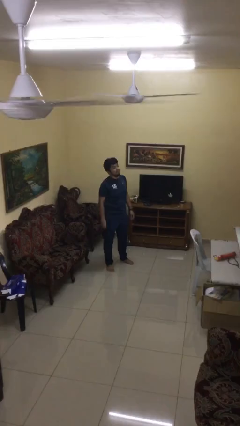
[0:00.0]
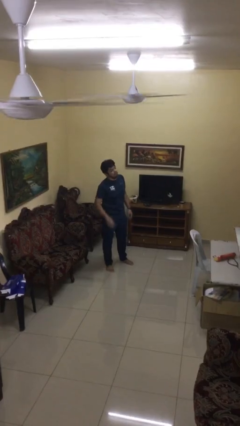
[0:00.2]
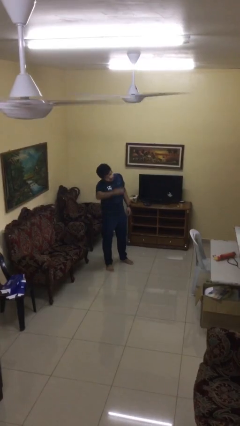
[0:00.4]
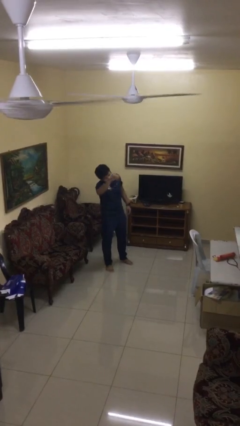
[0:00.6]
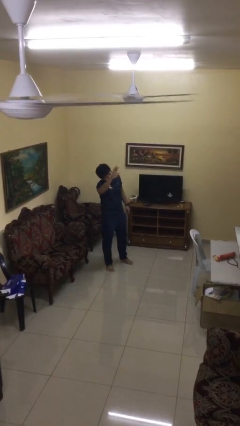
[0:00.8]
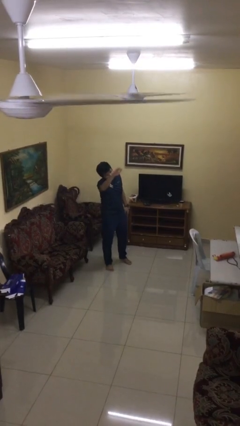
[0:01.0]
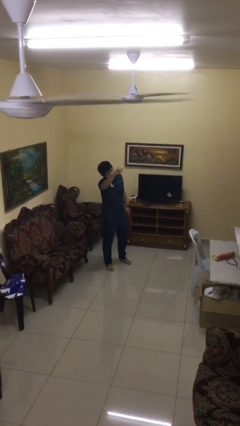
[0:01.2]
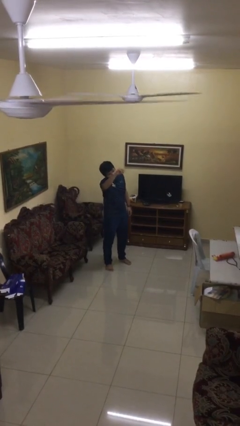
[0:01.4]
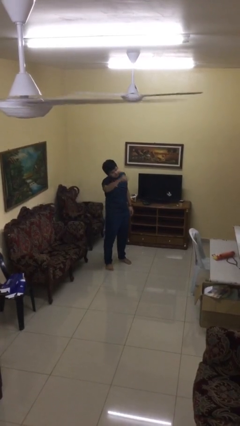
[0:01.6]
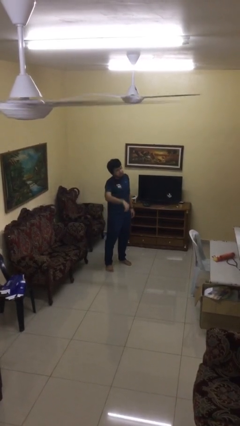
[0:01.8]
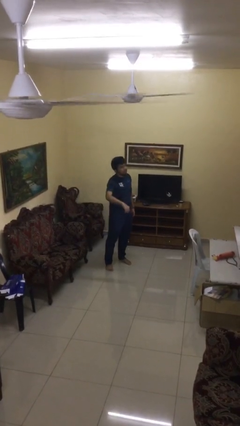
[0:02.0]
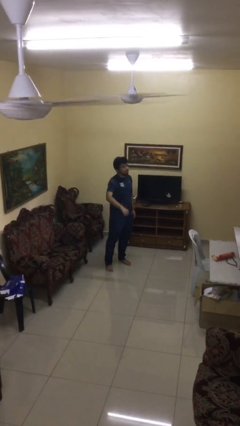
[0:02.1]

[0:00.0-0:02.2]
person gestures come here

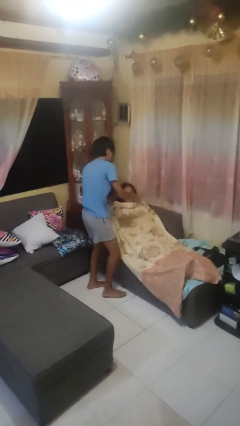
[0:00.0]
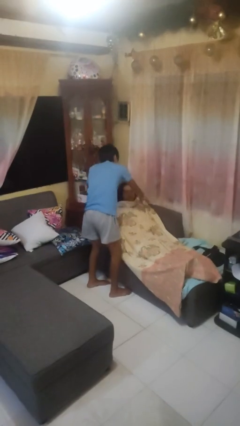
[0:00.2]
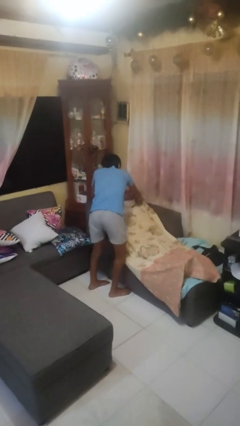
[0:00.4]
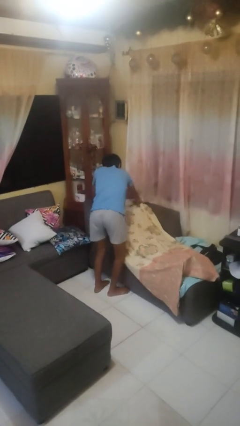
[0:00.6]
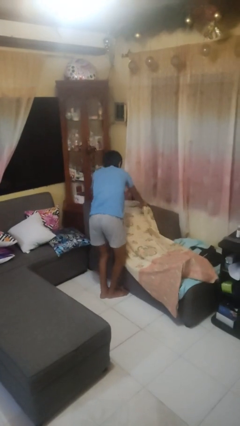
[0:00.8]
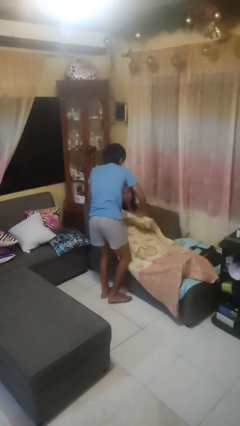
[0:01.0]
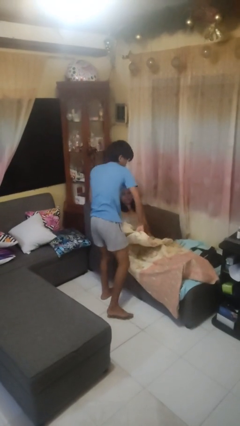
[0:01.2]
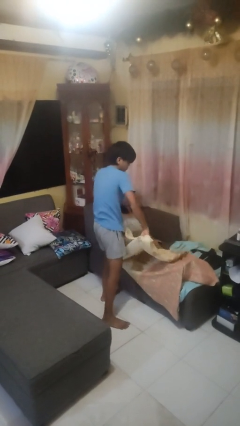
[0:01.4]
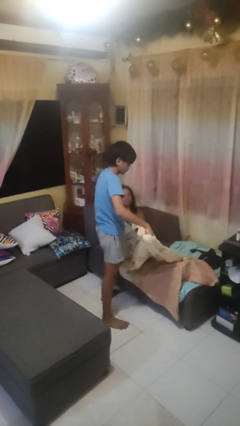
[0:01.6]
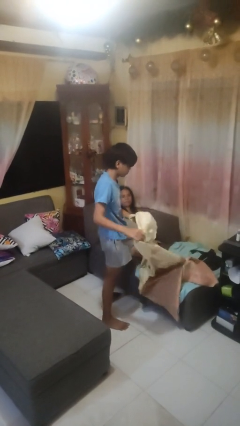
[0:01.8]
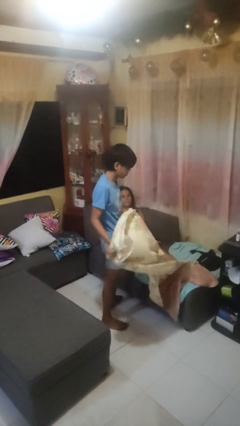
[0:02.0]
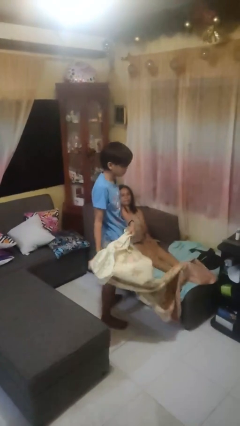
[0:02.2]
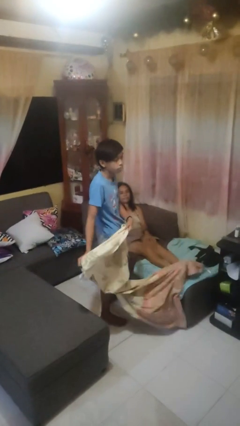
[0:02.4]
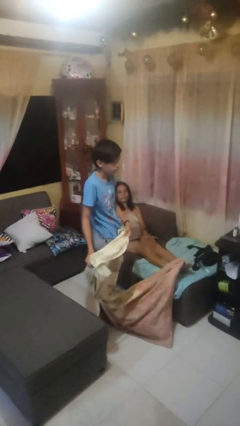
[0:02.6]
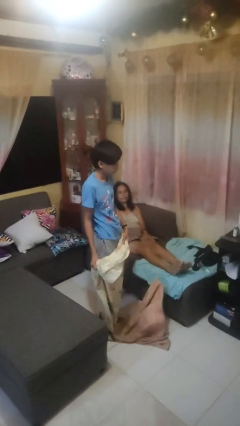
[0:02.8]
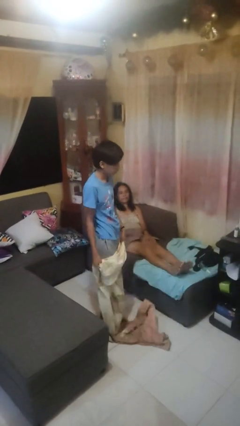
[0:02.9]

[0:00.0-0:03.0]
person uncovers friend with blanket

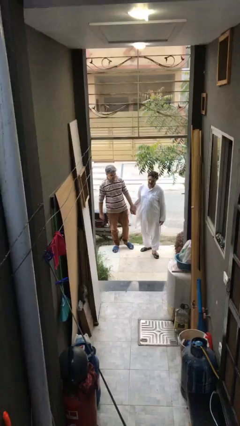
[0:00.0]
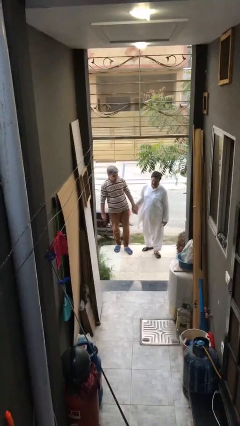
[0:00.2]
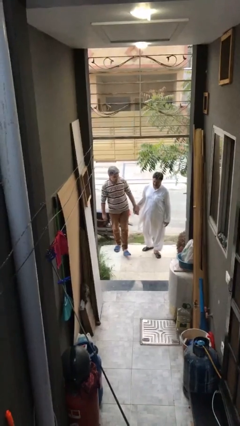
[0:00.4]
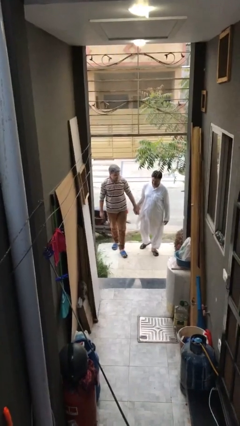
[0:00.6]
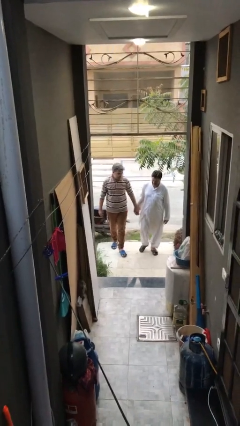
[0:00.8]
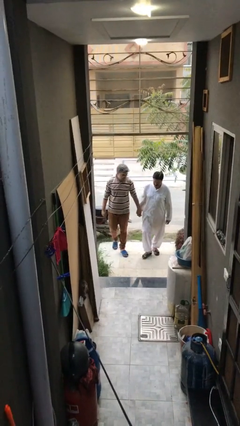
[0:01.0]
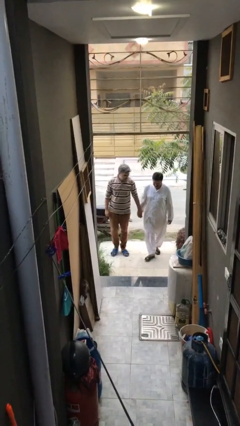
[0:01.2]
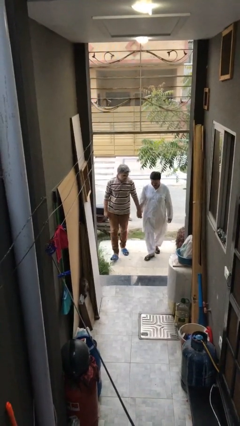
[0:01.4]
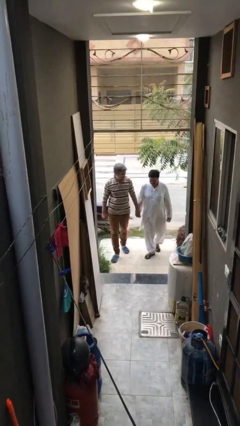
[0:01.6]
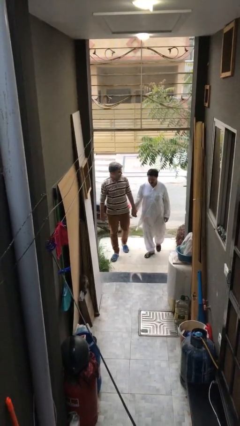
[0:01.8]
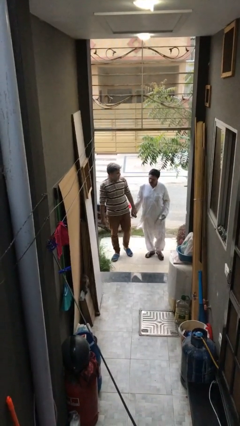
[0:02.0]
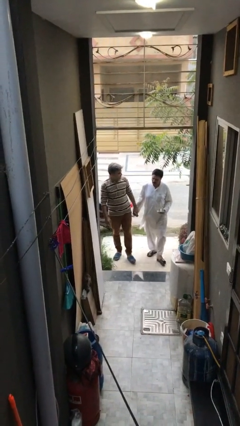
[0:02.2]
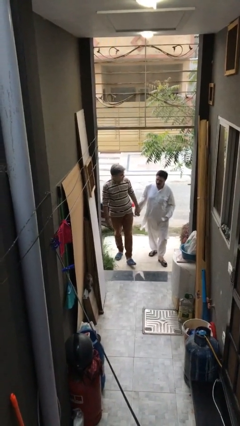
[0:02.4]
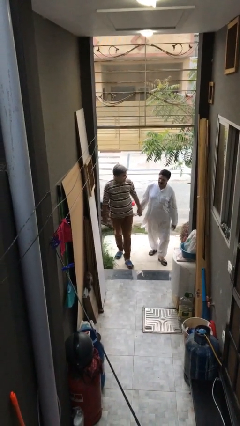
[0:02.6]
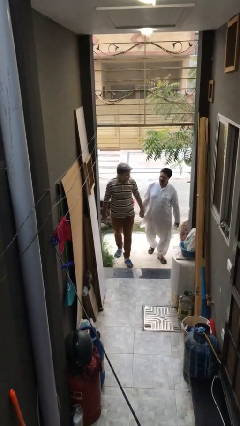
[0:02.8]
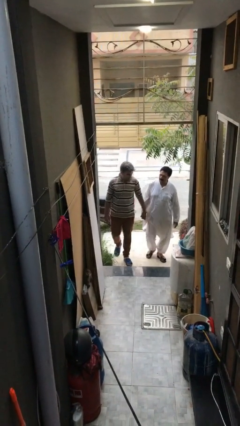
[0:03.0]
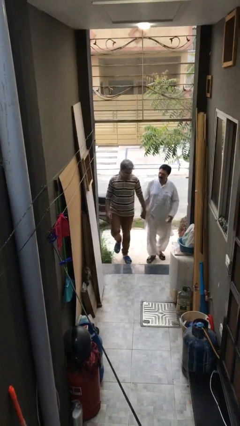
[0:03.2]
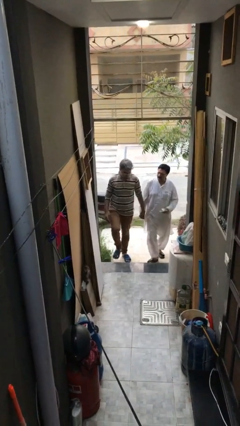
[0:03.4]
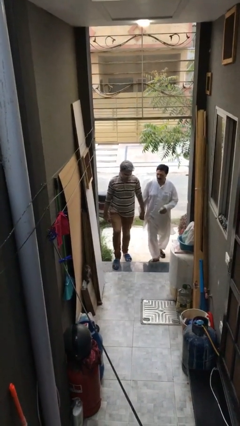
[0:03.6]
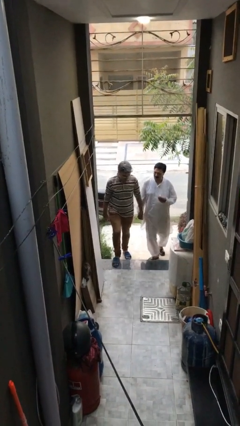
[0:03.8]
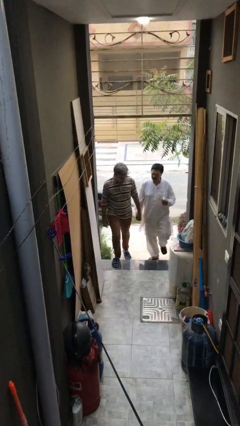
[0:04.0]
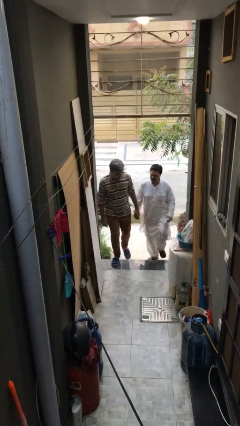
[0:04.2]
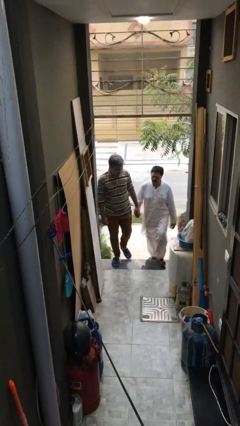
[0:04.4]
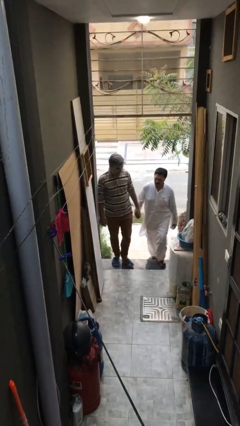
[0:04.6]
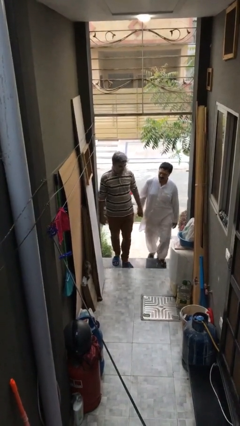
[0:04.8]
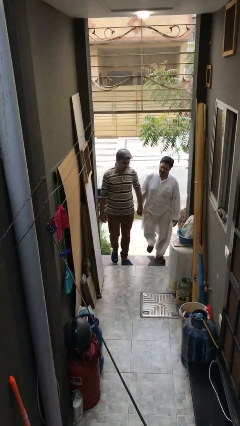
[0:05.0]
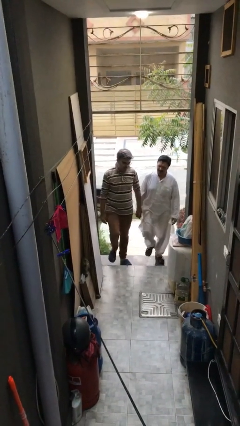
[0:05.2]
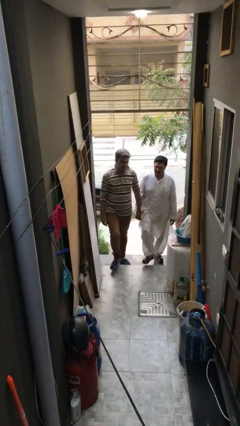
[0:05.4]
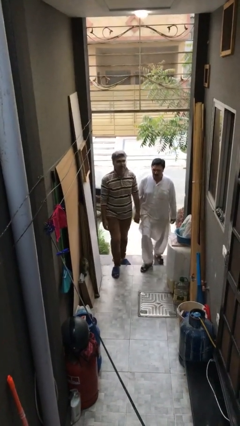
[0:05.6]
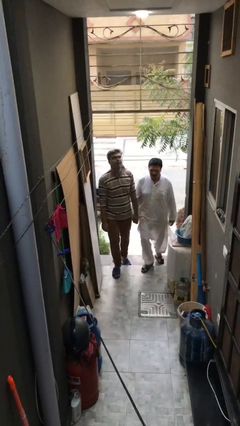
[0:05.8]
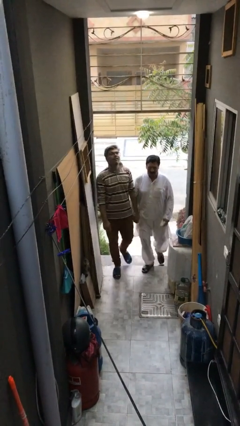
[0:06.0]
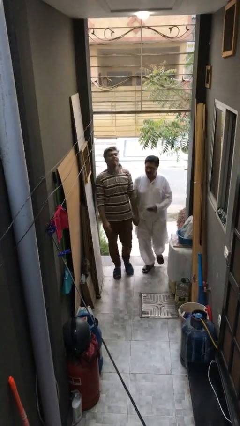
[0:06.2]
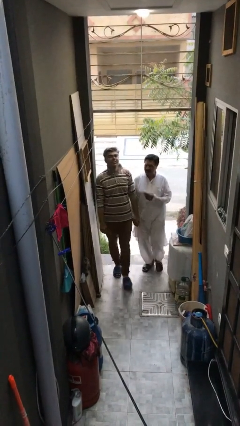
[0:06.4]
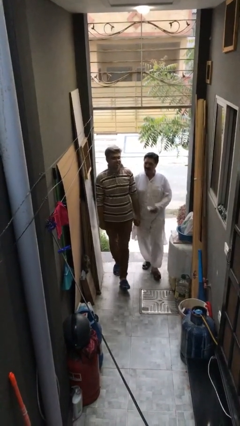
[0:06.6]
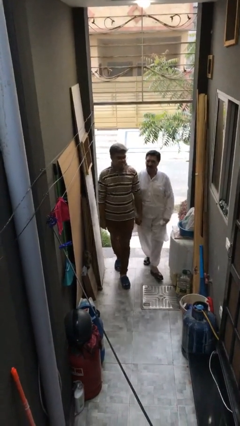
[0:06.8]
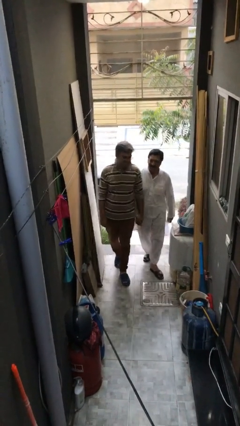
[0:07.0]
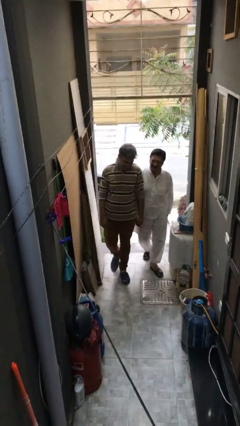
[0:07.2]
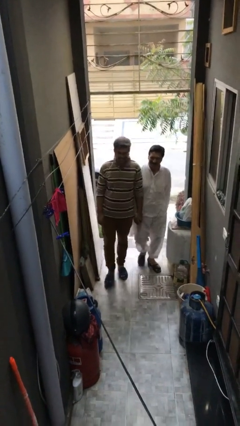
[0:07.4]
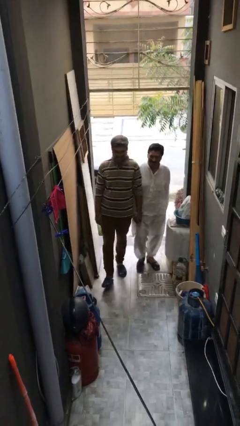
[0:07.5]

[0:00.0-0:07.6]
person holds hand

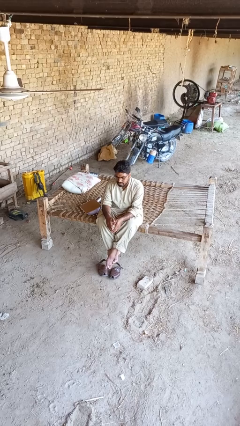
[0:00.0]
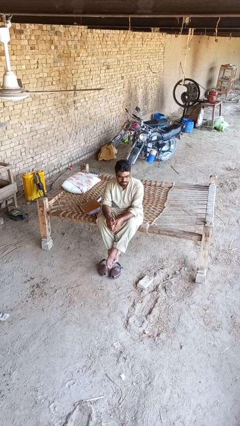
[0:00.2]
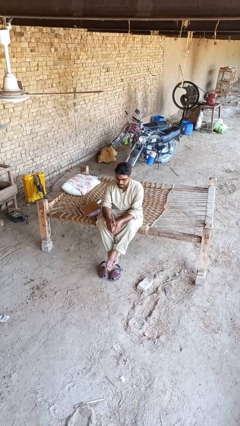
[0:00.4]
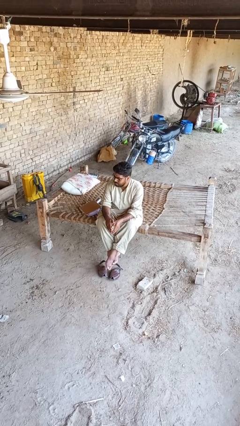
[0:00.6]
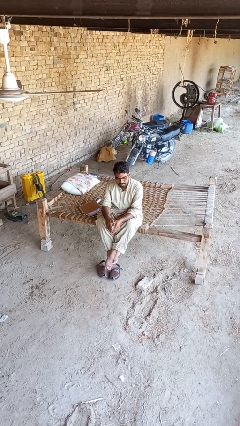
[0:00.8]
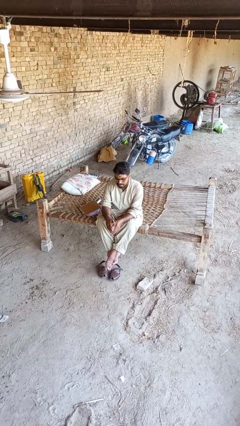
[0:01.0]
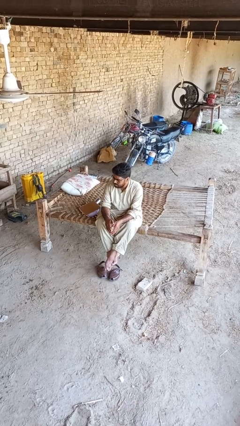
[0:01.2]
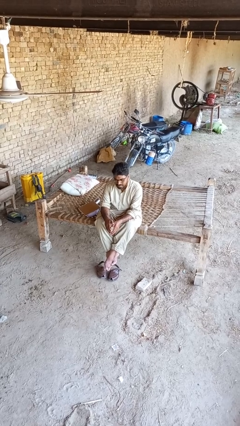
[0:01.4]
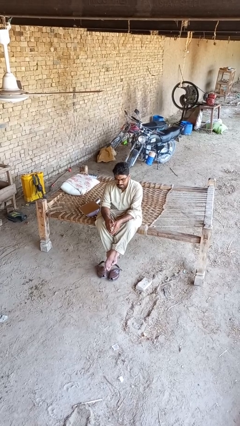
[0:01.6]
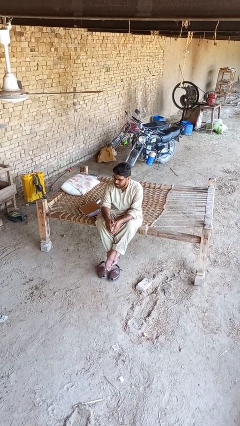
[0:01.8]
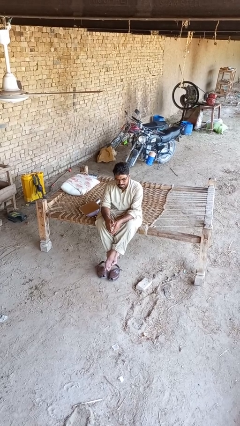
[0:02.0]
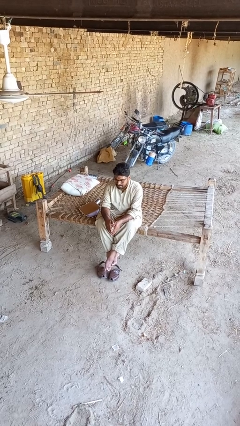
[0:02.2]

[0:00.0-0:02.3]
person shakes head

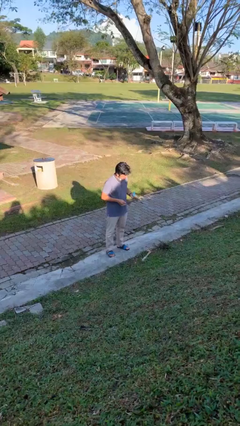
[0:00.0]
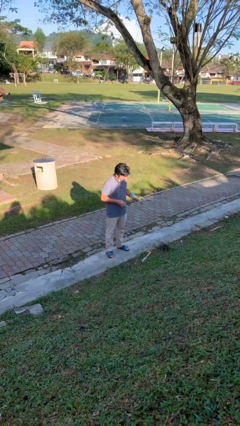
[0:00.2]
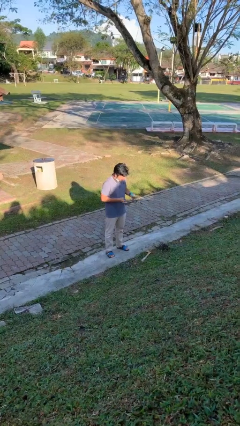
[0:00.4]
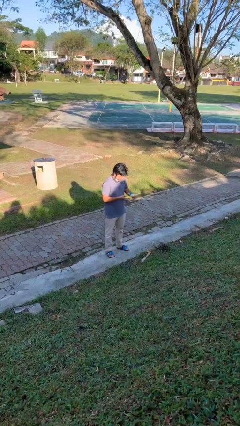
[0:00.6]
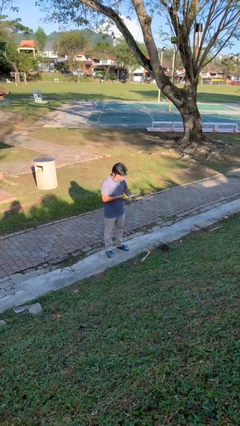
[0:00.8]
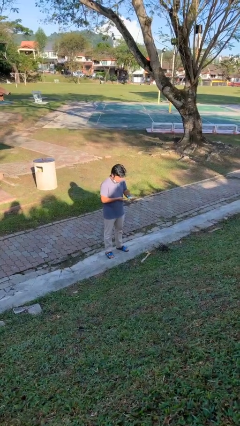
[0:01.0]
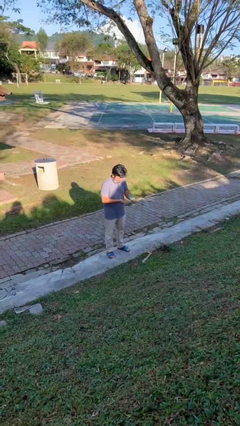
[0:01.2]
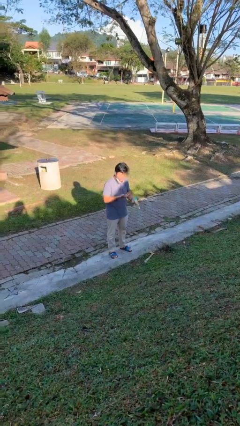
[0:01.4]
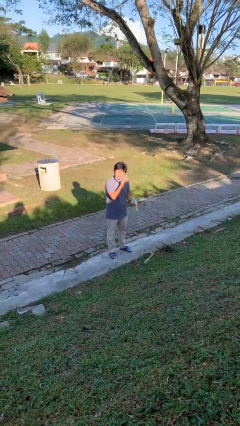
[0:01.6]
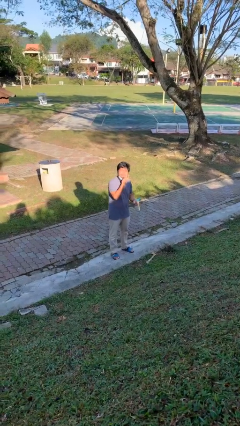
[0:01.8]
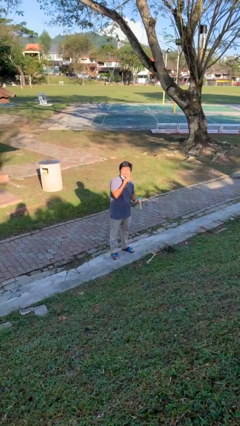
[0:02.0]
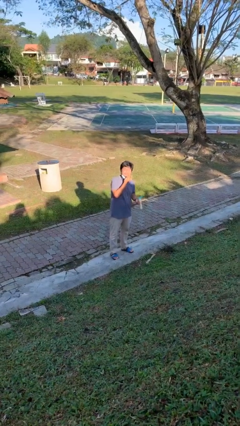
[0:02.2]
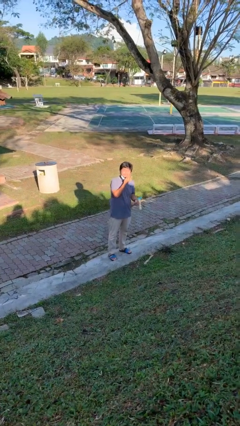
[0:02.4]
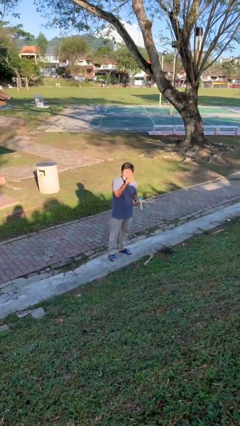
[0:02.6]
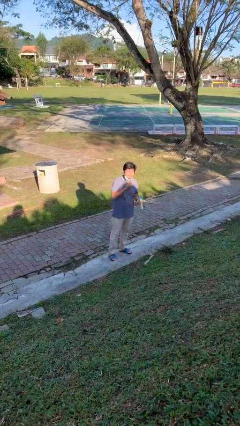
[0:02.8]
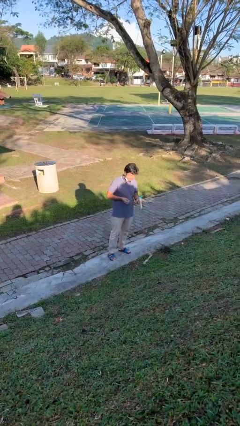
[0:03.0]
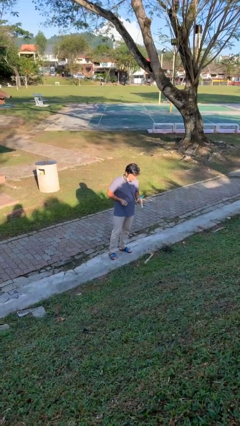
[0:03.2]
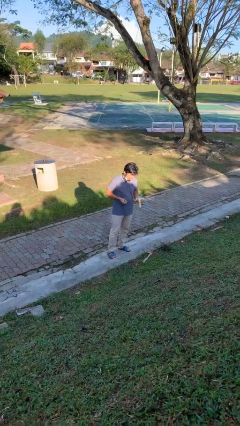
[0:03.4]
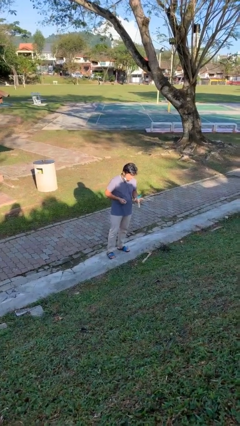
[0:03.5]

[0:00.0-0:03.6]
person applies facial moisturizer
